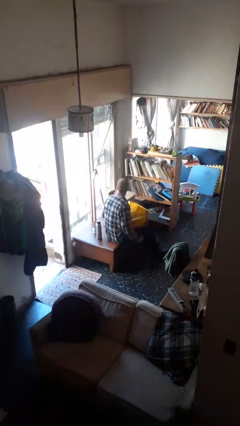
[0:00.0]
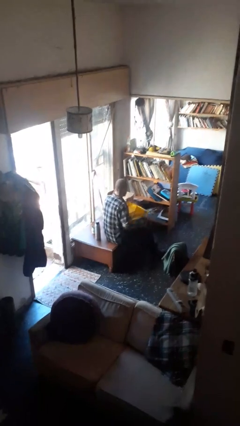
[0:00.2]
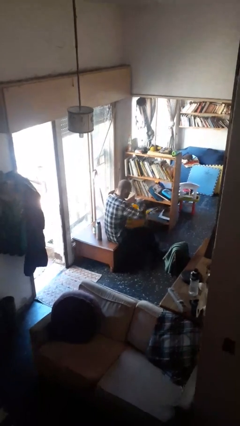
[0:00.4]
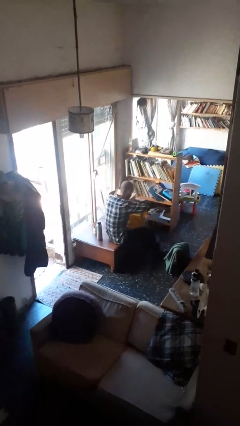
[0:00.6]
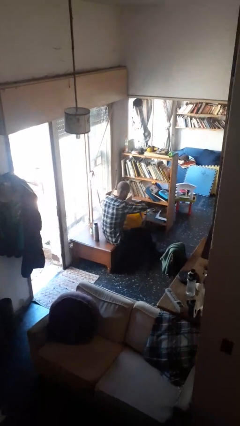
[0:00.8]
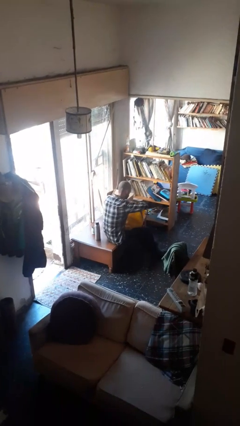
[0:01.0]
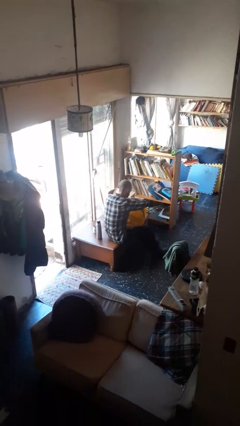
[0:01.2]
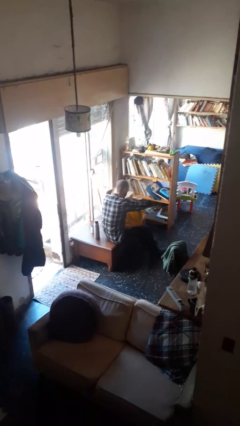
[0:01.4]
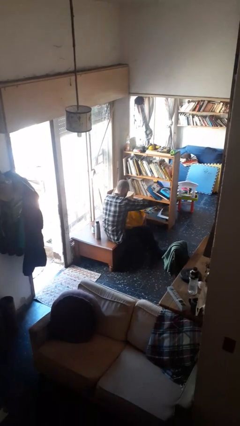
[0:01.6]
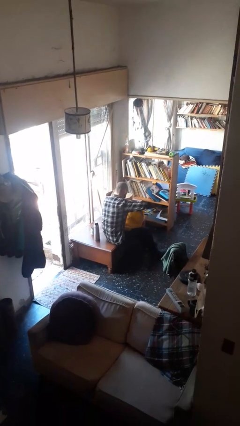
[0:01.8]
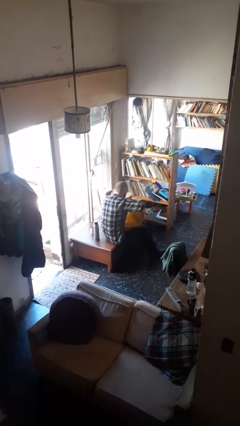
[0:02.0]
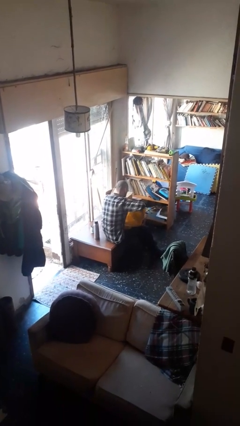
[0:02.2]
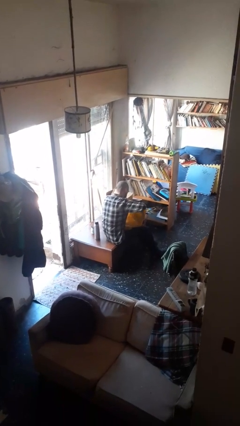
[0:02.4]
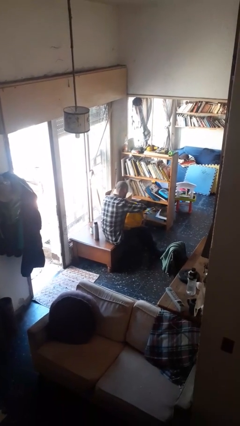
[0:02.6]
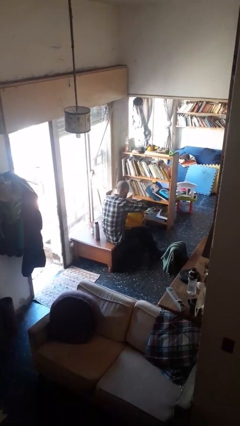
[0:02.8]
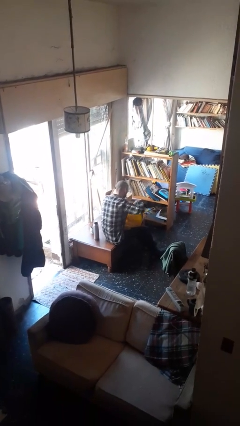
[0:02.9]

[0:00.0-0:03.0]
person searches in bag

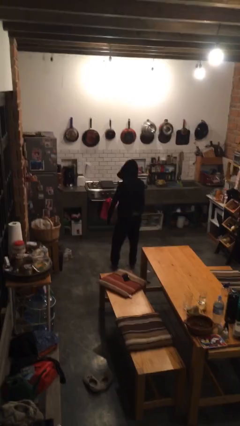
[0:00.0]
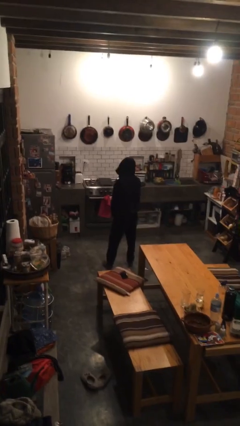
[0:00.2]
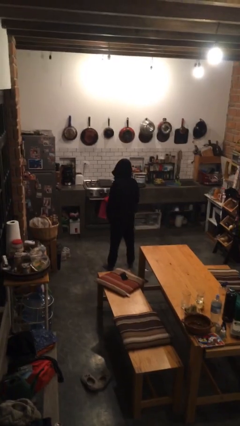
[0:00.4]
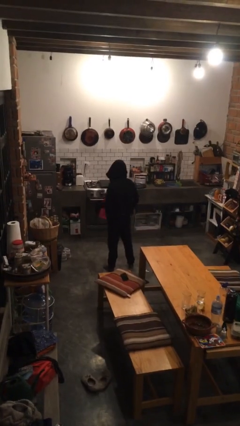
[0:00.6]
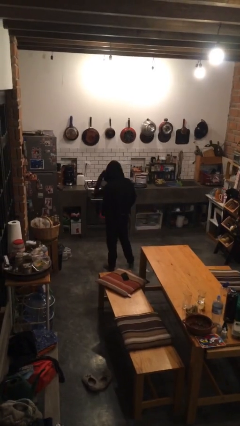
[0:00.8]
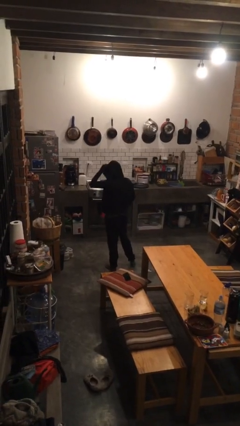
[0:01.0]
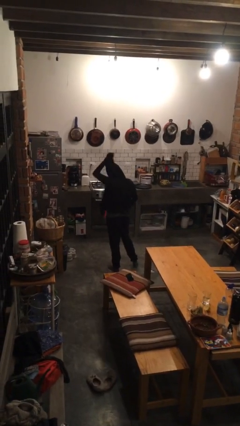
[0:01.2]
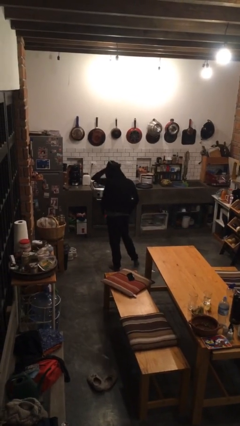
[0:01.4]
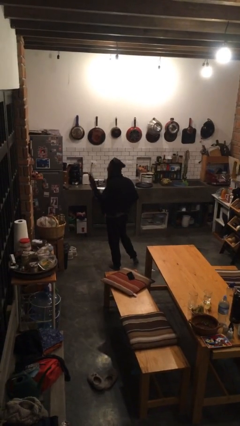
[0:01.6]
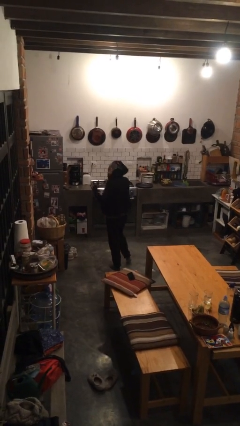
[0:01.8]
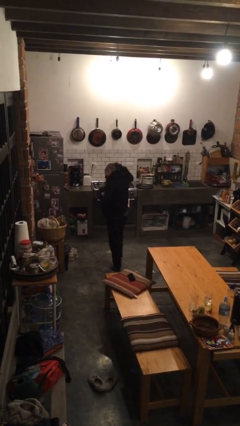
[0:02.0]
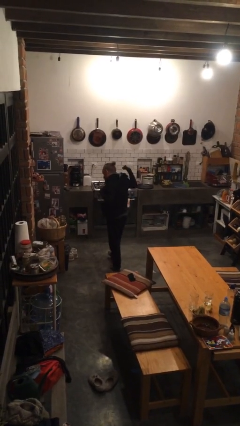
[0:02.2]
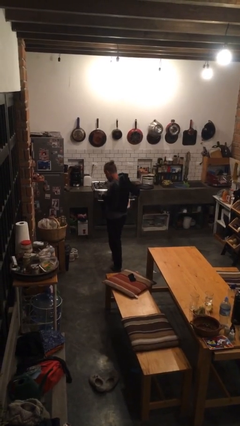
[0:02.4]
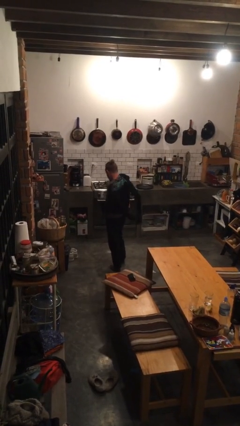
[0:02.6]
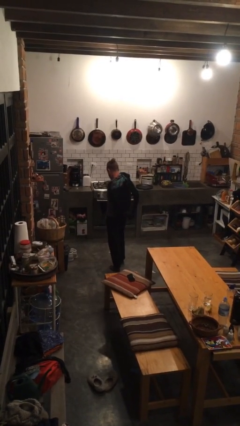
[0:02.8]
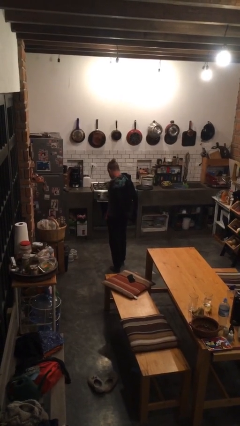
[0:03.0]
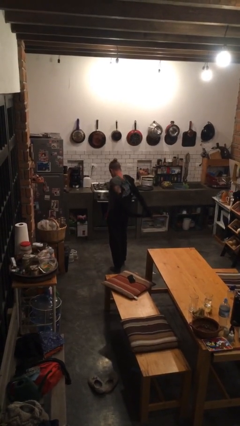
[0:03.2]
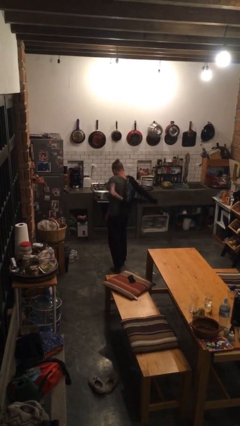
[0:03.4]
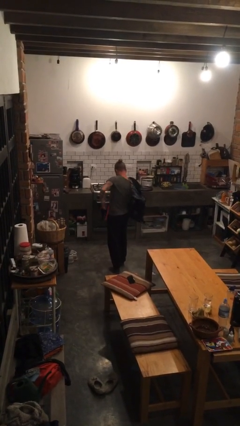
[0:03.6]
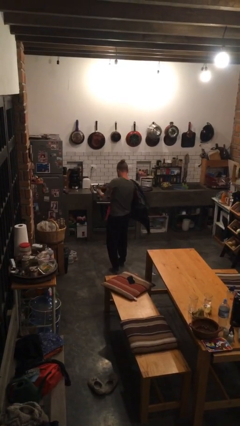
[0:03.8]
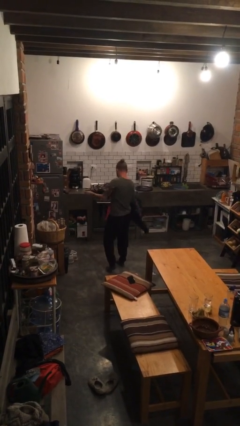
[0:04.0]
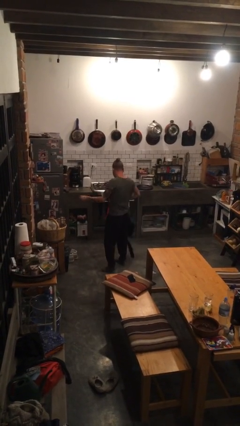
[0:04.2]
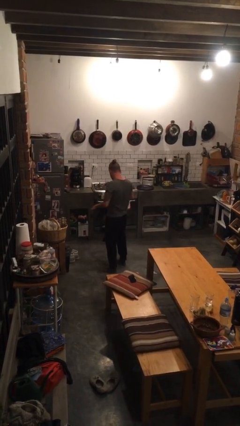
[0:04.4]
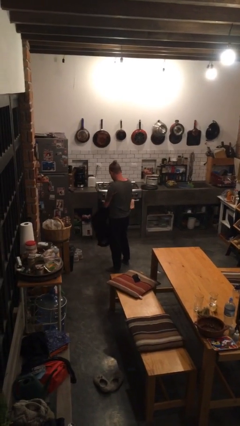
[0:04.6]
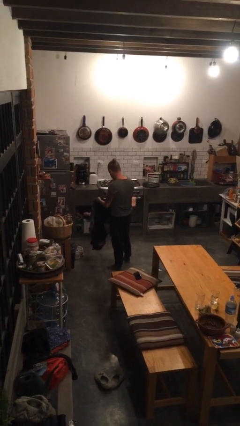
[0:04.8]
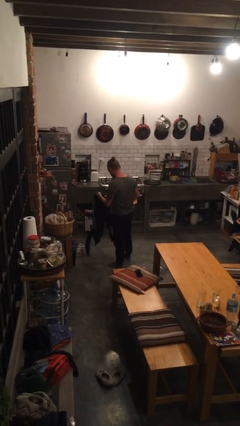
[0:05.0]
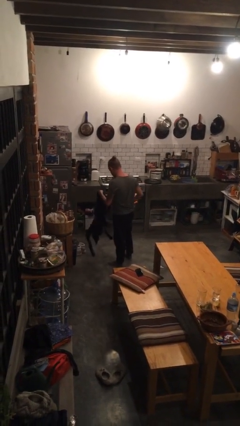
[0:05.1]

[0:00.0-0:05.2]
person takes off hoodie

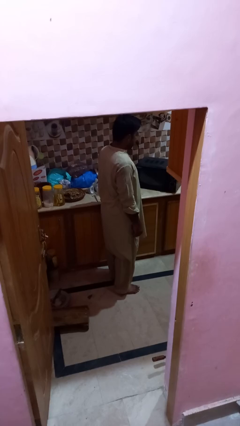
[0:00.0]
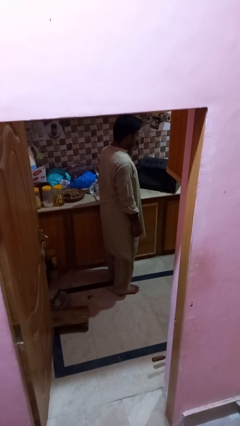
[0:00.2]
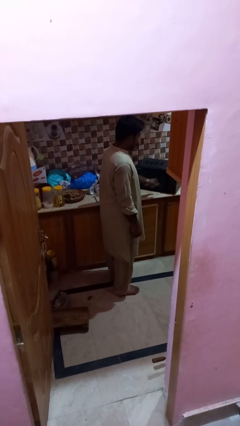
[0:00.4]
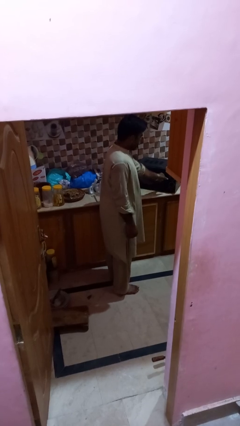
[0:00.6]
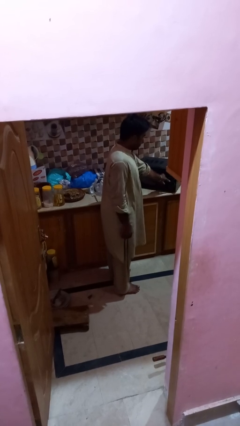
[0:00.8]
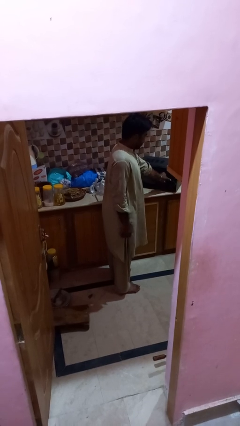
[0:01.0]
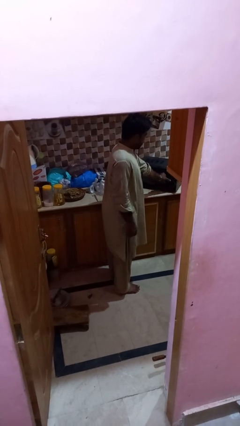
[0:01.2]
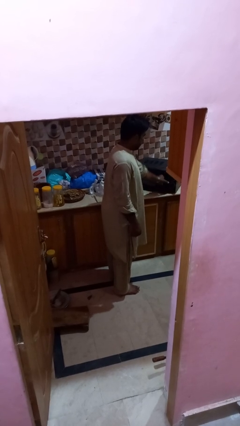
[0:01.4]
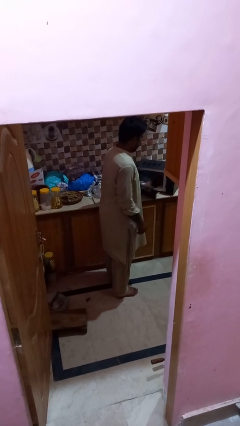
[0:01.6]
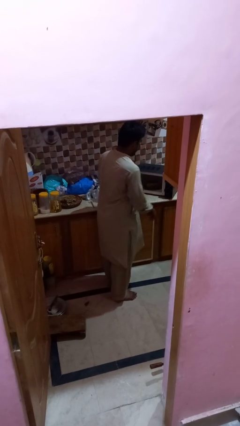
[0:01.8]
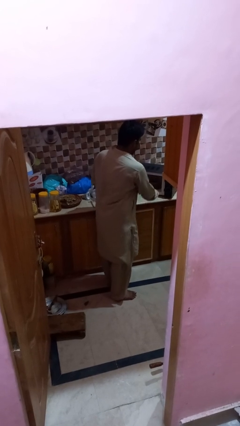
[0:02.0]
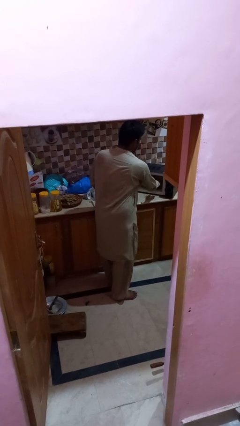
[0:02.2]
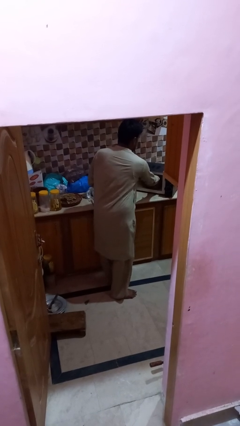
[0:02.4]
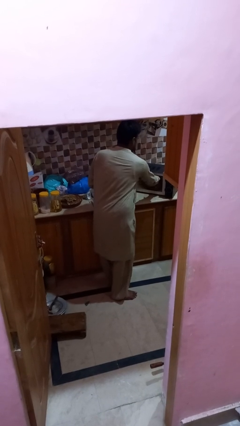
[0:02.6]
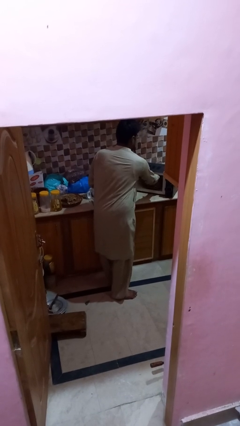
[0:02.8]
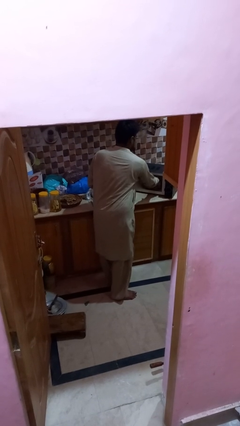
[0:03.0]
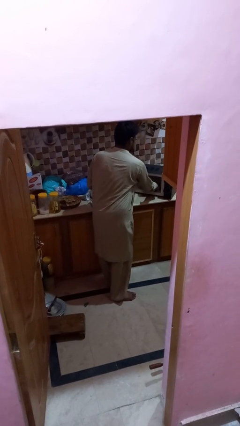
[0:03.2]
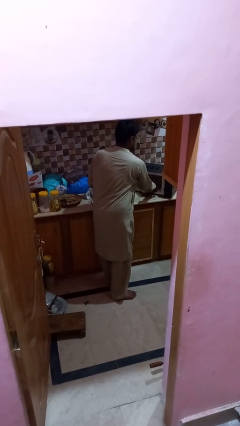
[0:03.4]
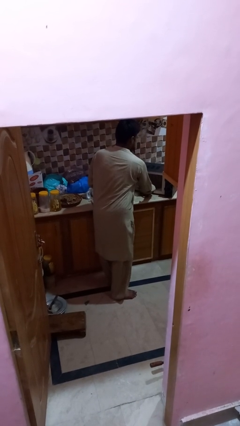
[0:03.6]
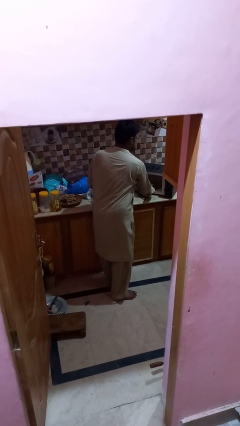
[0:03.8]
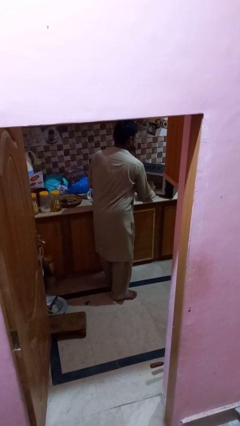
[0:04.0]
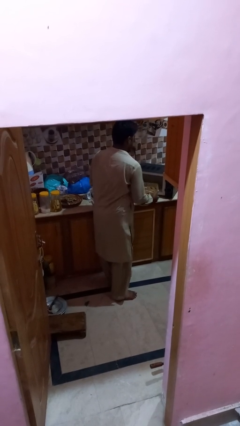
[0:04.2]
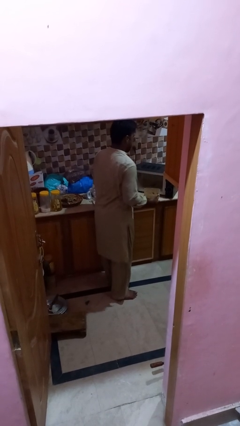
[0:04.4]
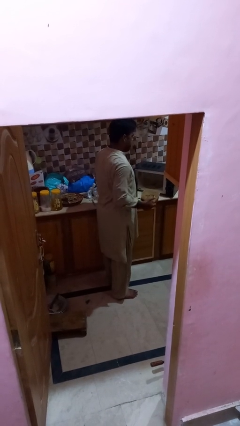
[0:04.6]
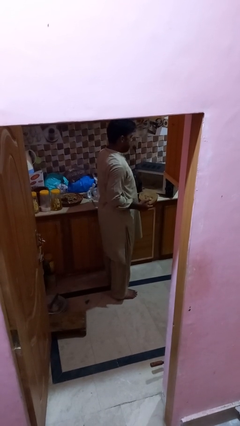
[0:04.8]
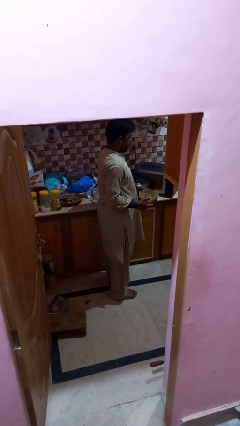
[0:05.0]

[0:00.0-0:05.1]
person takes object from microwave

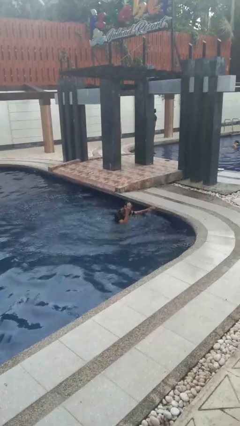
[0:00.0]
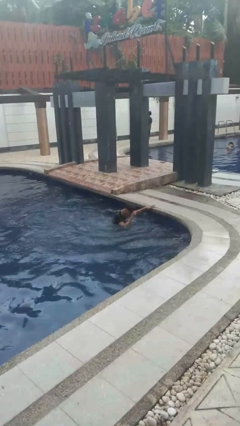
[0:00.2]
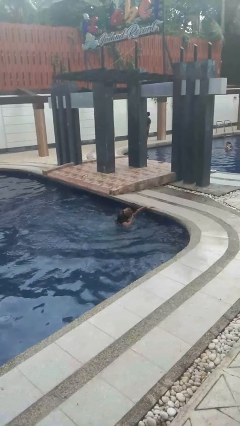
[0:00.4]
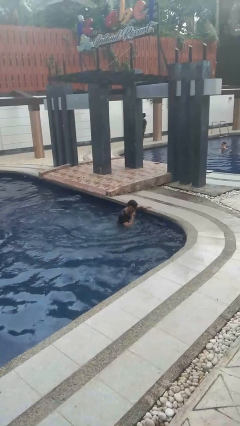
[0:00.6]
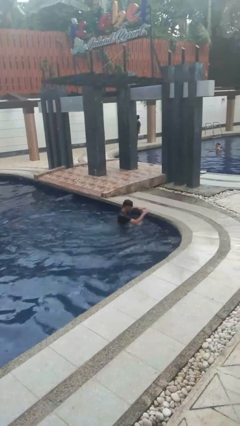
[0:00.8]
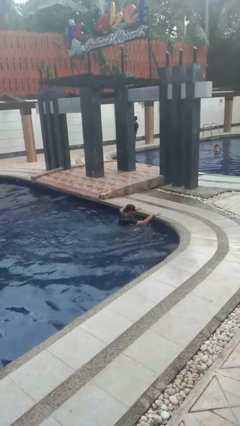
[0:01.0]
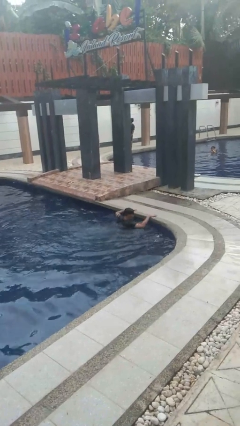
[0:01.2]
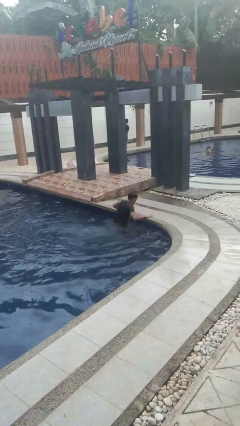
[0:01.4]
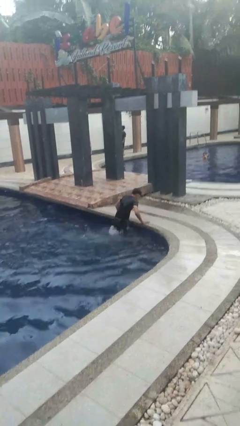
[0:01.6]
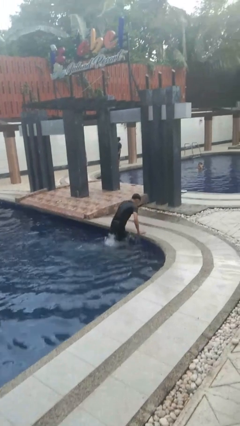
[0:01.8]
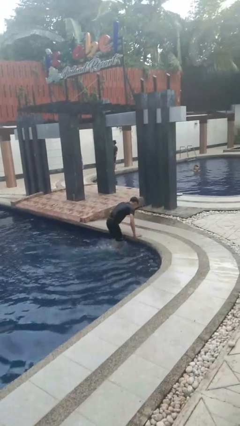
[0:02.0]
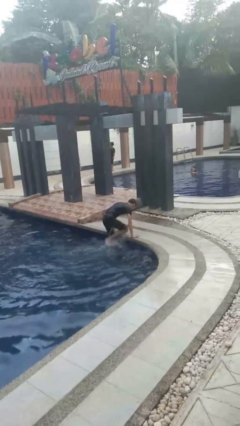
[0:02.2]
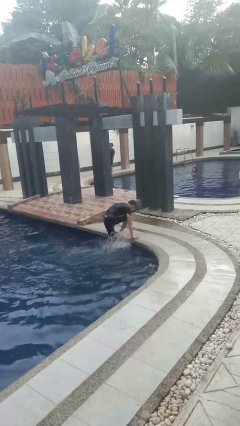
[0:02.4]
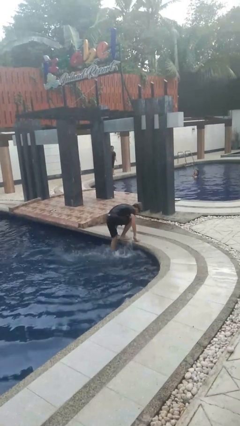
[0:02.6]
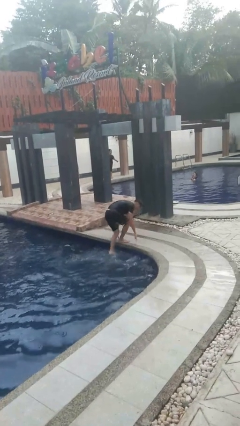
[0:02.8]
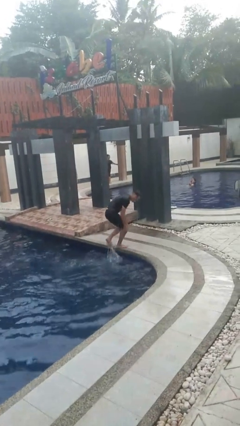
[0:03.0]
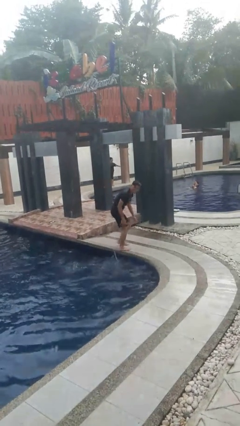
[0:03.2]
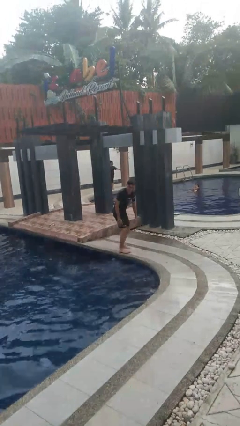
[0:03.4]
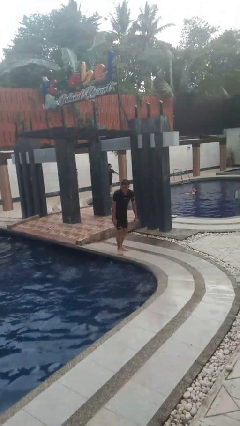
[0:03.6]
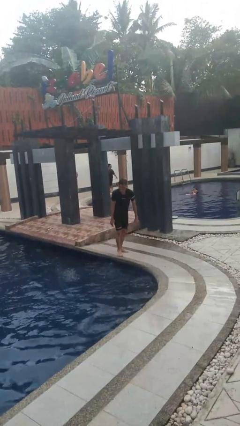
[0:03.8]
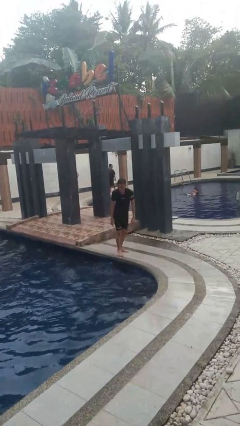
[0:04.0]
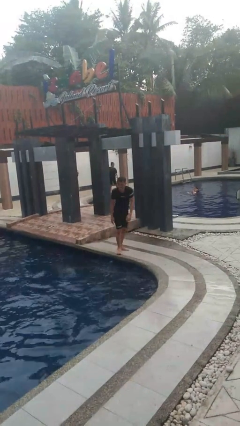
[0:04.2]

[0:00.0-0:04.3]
person exits pool

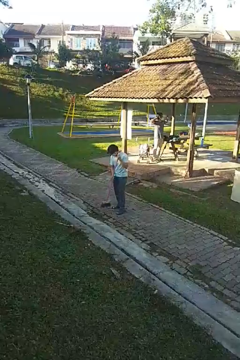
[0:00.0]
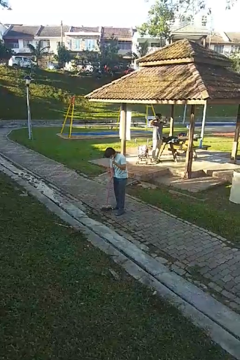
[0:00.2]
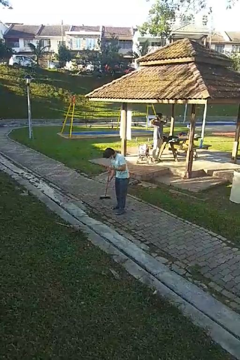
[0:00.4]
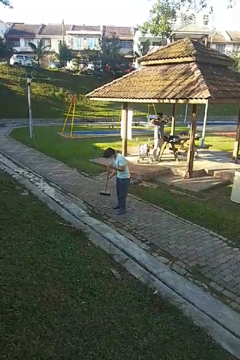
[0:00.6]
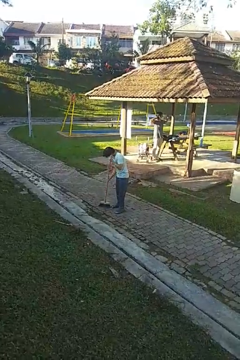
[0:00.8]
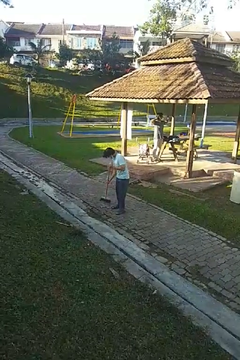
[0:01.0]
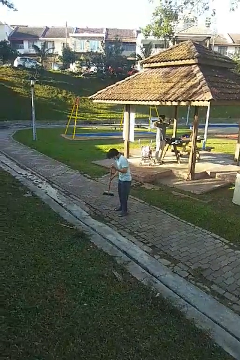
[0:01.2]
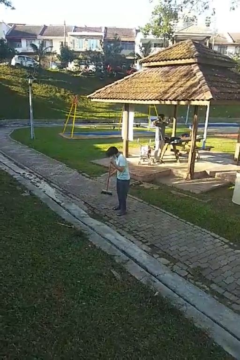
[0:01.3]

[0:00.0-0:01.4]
person sweeps floor
